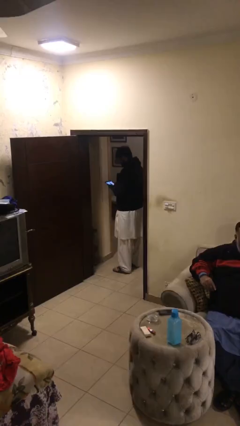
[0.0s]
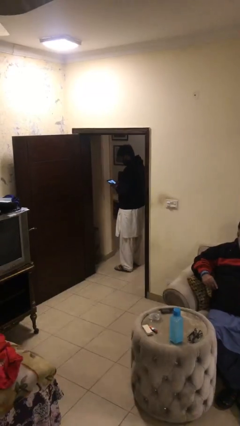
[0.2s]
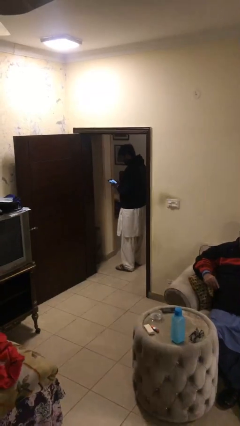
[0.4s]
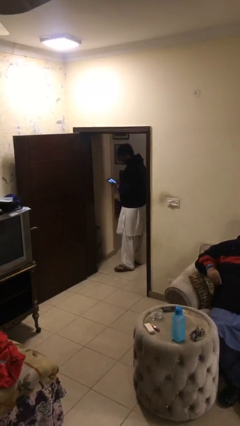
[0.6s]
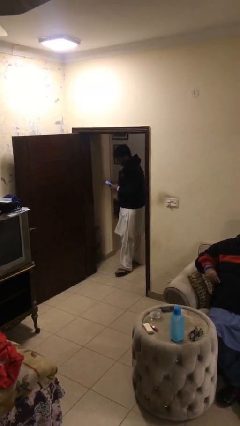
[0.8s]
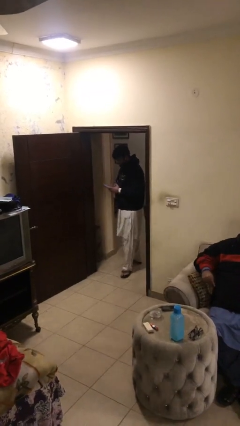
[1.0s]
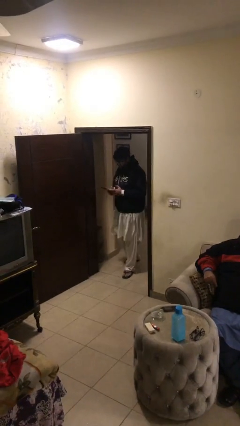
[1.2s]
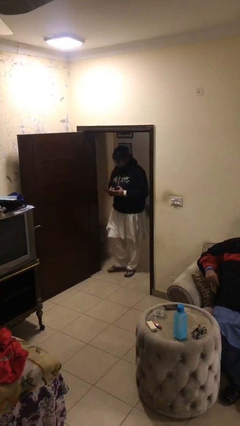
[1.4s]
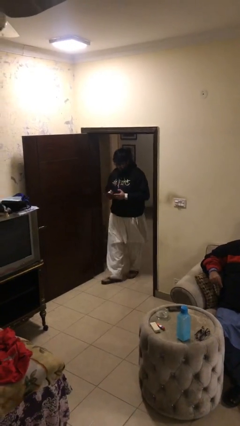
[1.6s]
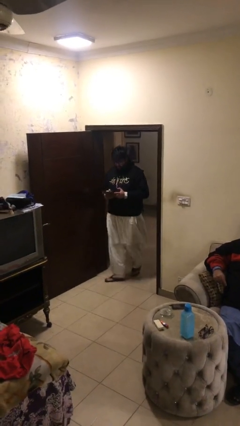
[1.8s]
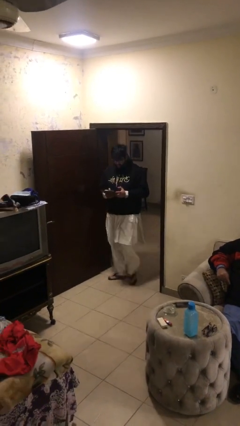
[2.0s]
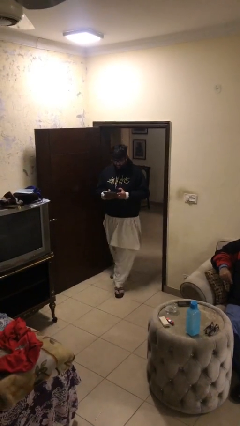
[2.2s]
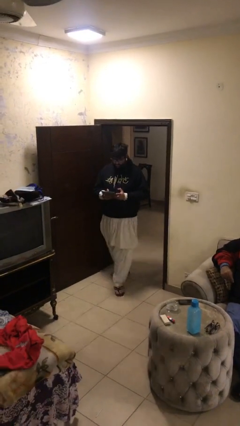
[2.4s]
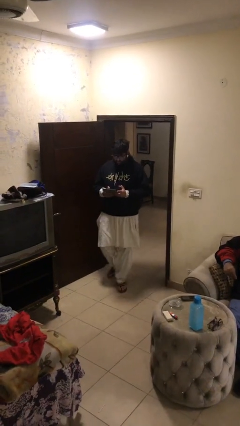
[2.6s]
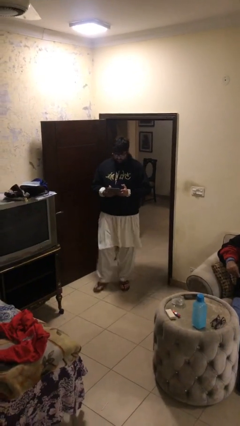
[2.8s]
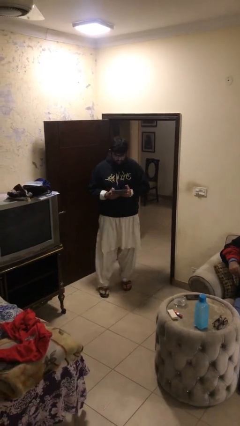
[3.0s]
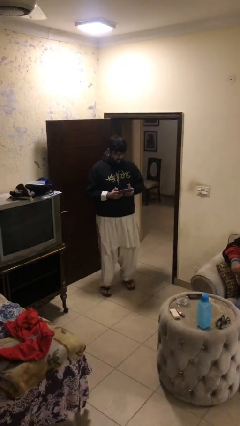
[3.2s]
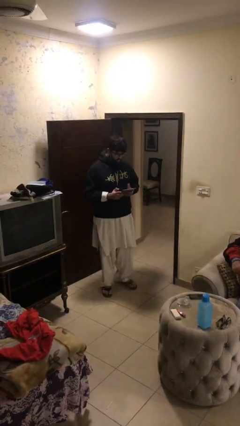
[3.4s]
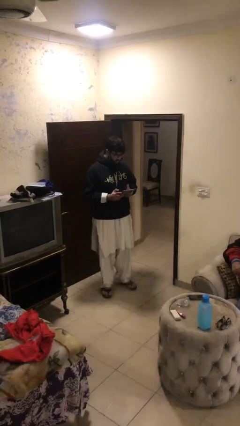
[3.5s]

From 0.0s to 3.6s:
person enters scene through structure

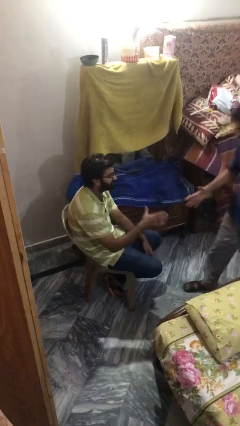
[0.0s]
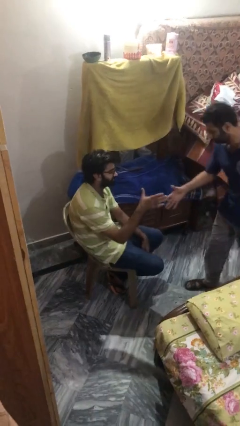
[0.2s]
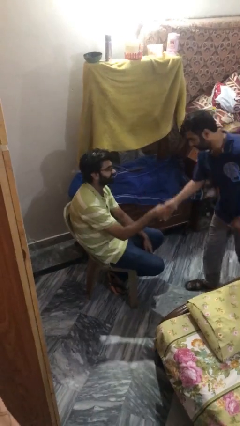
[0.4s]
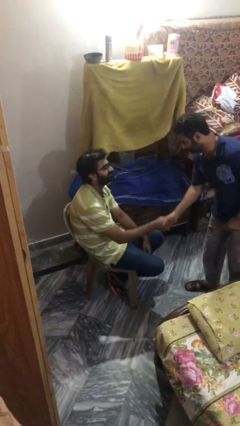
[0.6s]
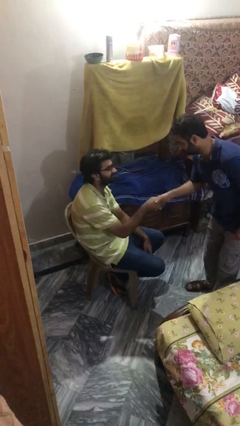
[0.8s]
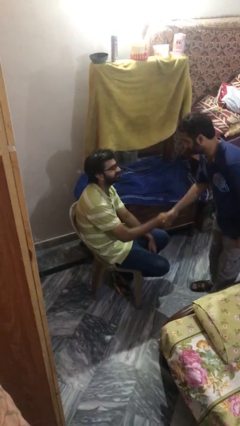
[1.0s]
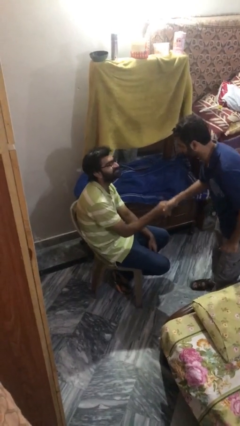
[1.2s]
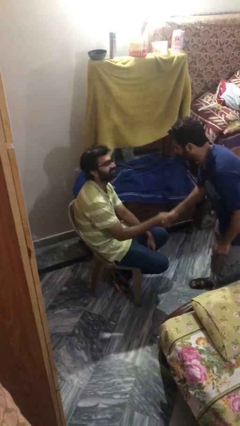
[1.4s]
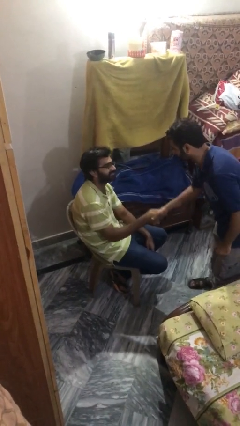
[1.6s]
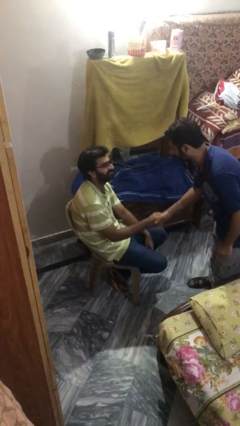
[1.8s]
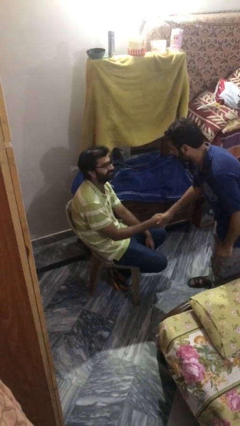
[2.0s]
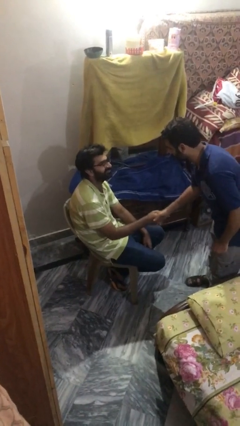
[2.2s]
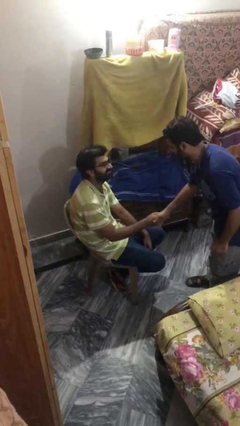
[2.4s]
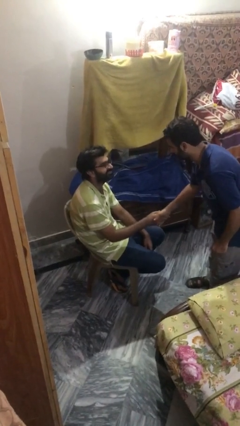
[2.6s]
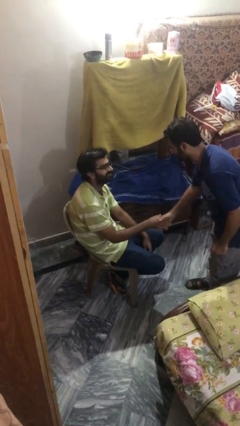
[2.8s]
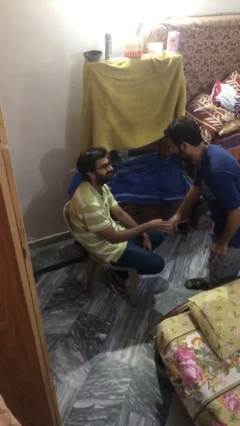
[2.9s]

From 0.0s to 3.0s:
person shakes hand

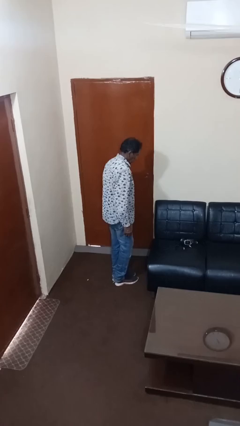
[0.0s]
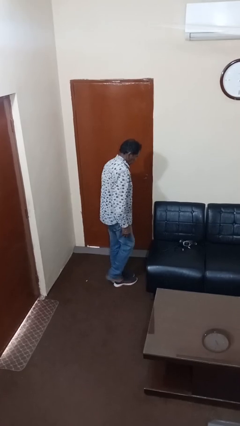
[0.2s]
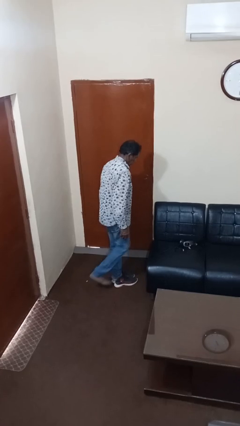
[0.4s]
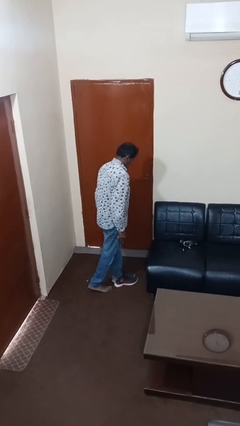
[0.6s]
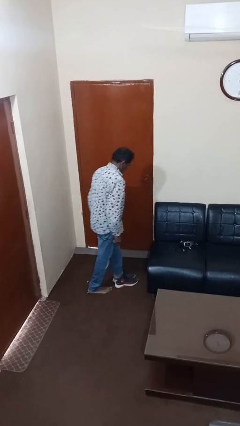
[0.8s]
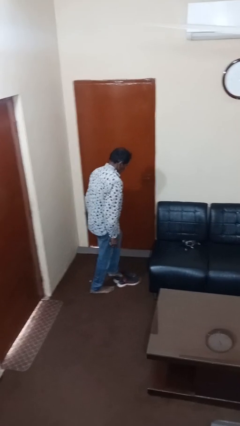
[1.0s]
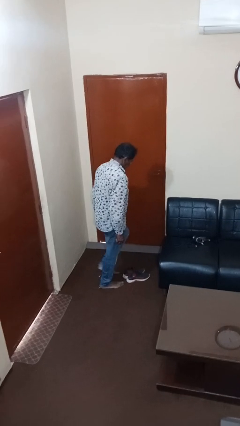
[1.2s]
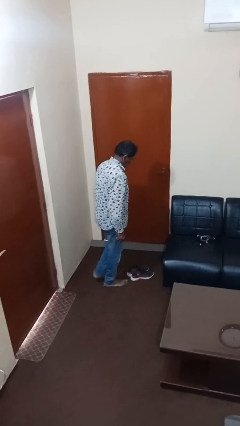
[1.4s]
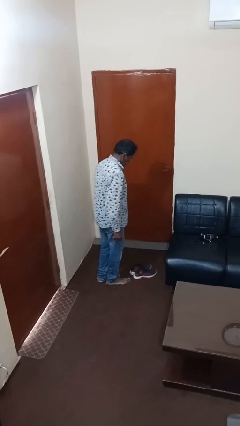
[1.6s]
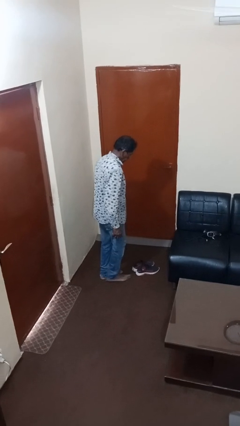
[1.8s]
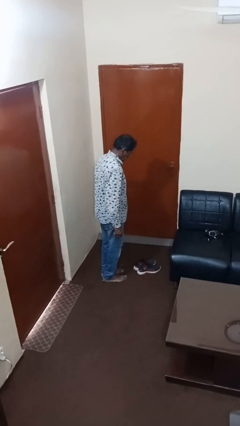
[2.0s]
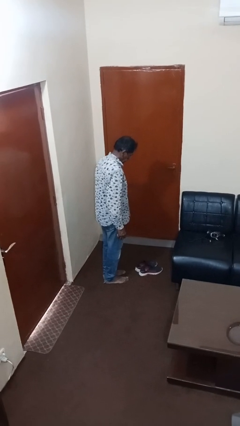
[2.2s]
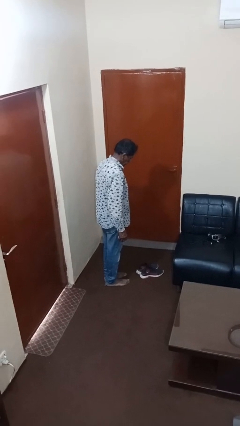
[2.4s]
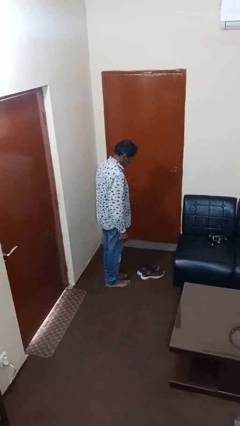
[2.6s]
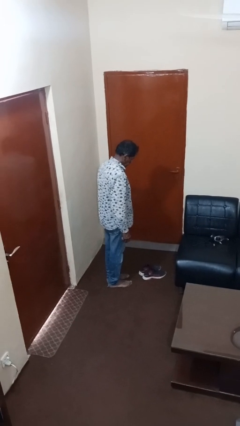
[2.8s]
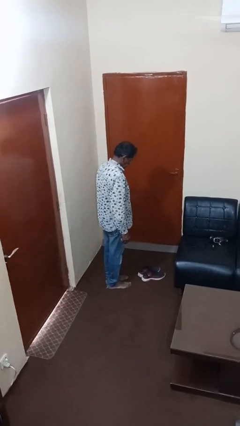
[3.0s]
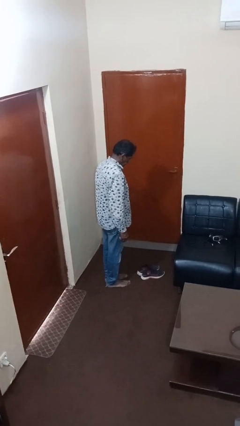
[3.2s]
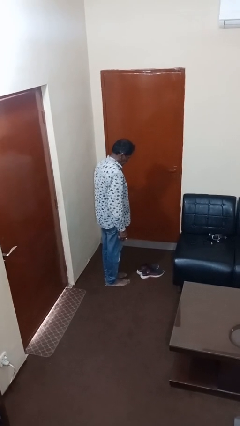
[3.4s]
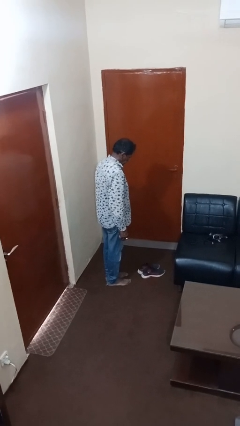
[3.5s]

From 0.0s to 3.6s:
person takes off shoes

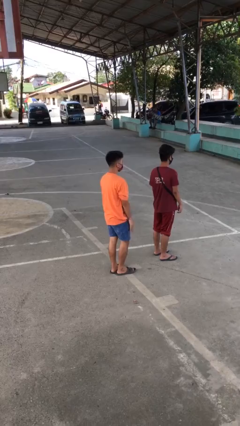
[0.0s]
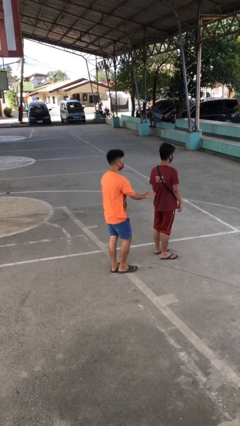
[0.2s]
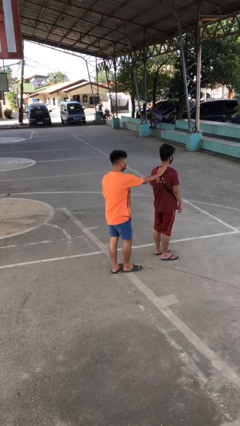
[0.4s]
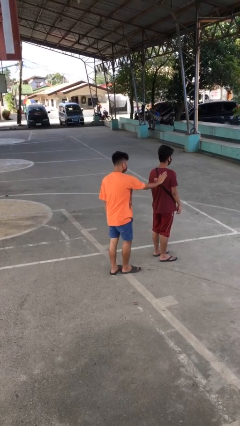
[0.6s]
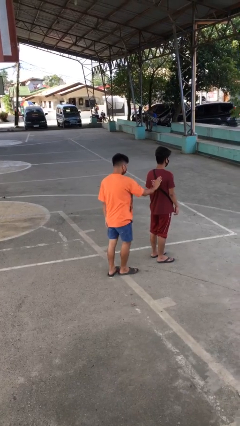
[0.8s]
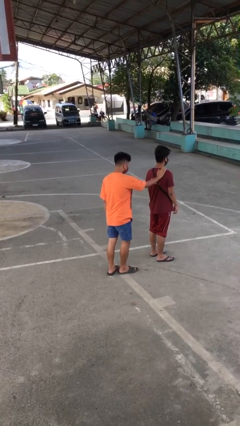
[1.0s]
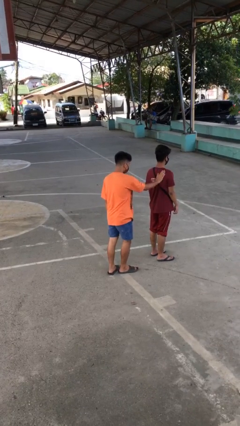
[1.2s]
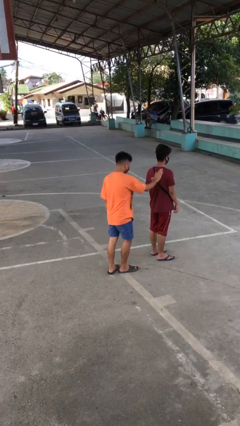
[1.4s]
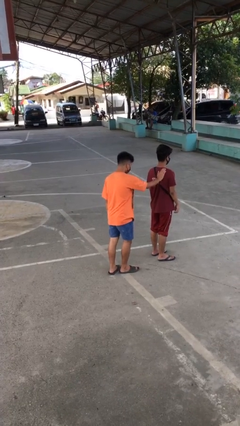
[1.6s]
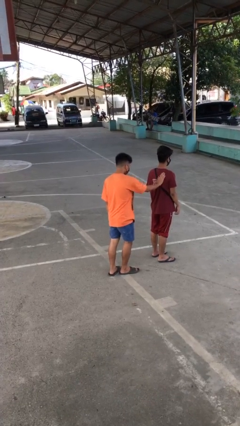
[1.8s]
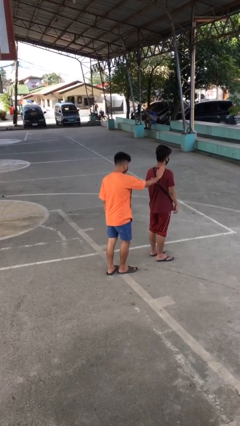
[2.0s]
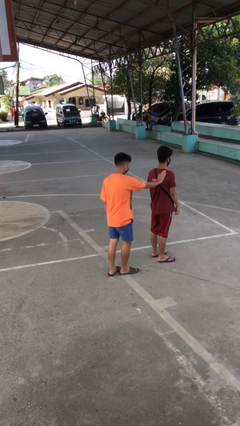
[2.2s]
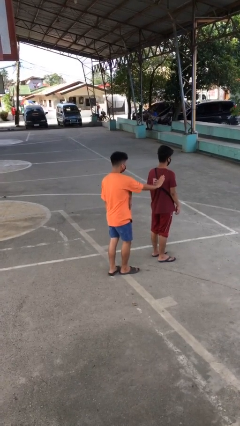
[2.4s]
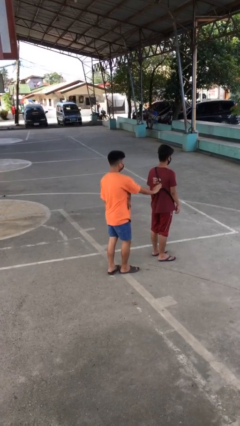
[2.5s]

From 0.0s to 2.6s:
person touches back of person

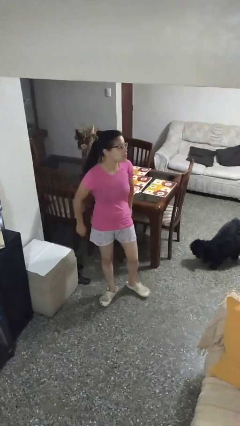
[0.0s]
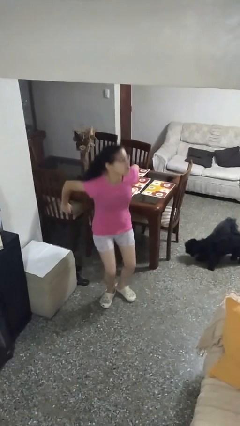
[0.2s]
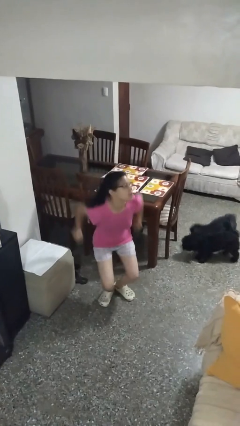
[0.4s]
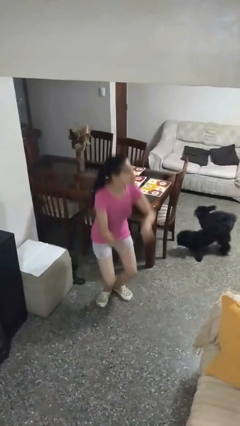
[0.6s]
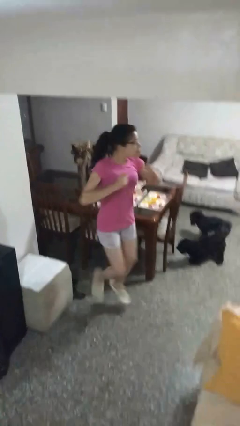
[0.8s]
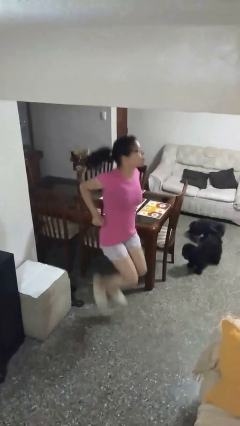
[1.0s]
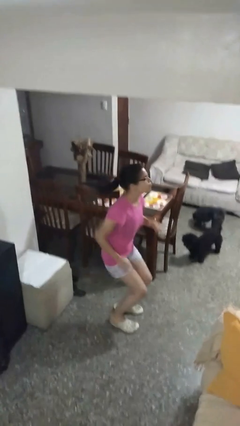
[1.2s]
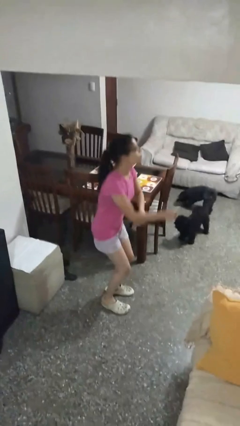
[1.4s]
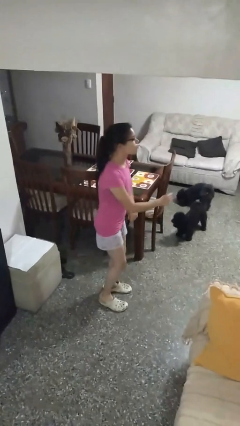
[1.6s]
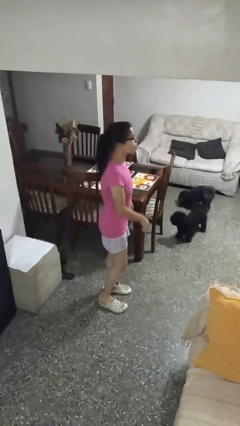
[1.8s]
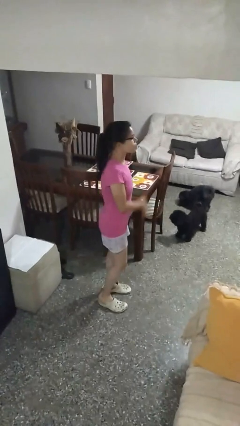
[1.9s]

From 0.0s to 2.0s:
person jumps

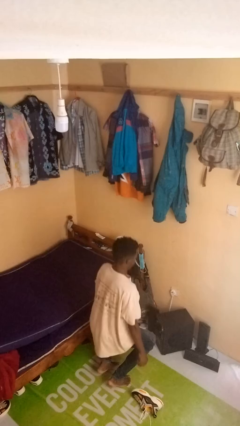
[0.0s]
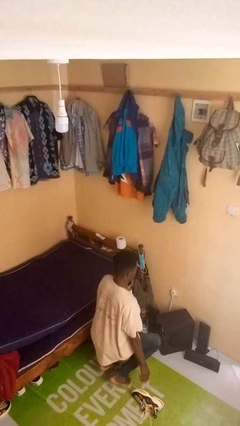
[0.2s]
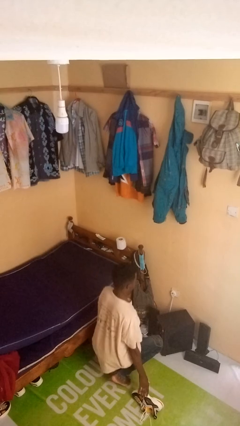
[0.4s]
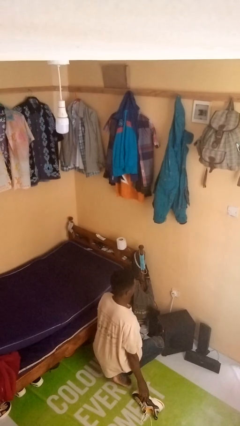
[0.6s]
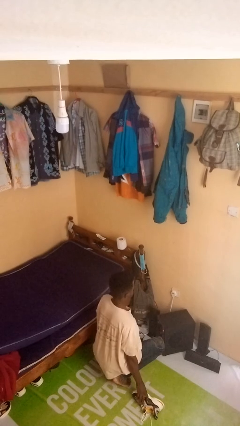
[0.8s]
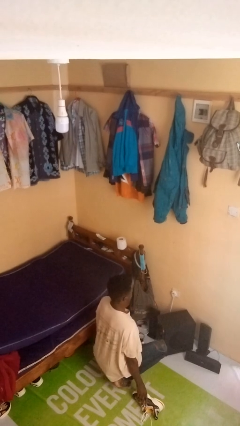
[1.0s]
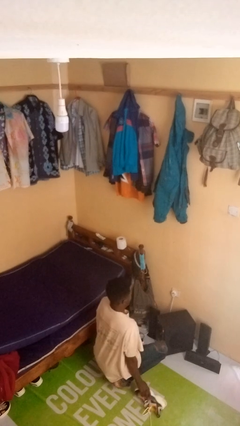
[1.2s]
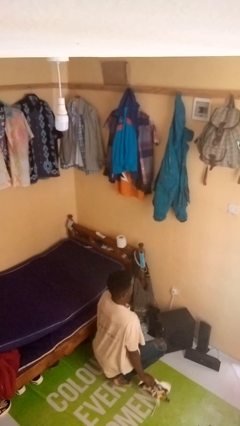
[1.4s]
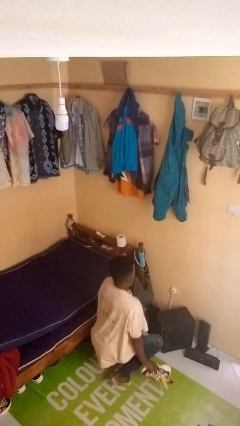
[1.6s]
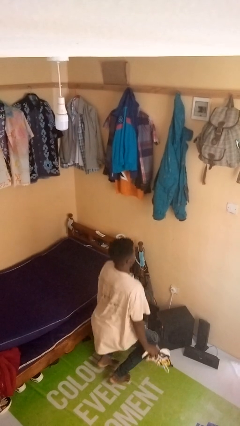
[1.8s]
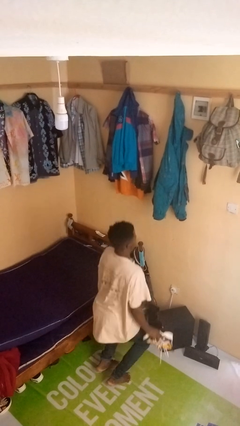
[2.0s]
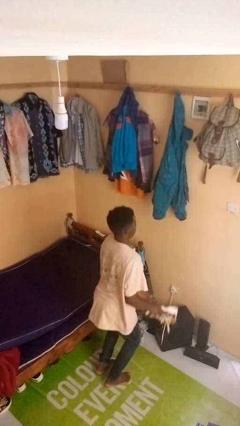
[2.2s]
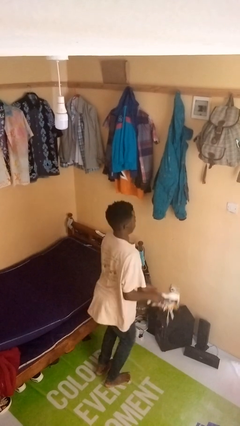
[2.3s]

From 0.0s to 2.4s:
person picks up object from floor

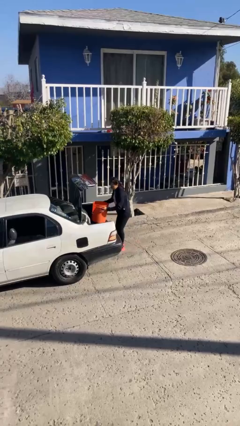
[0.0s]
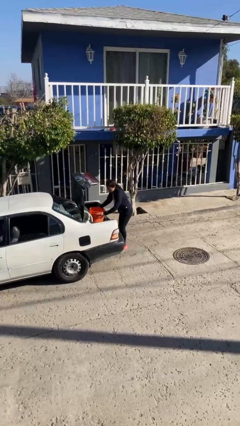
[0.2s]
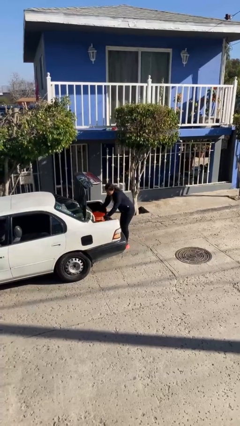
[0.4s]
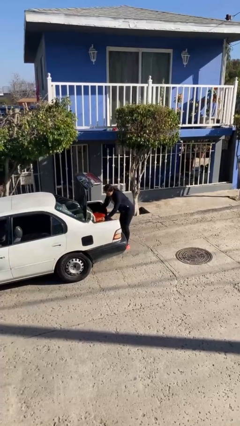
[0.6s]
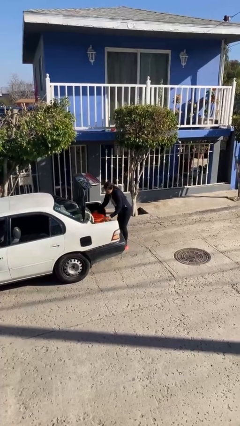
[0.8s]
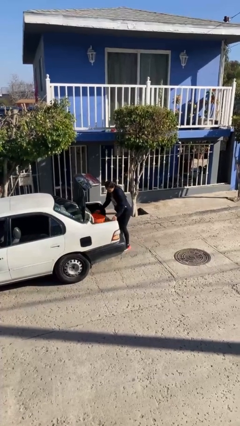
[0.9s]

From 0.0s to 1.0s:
person loads car
